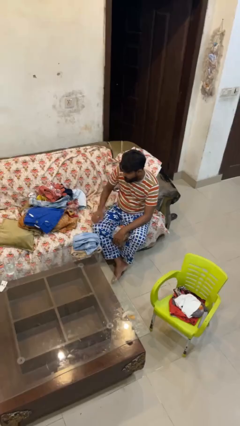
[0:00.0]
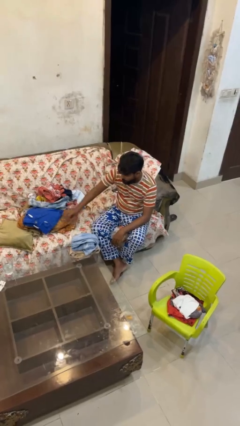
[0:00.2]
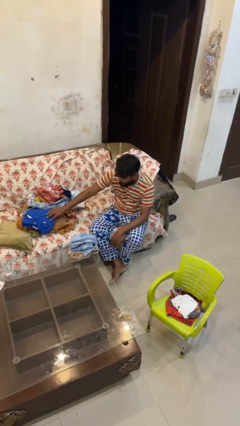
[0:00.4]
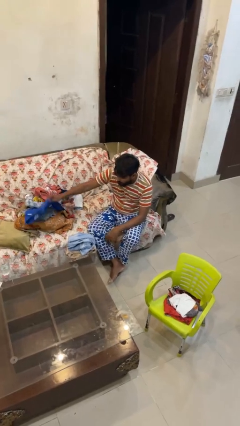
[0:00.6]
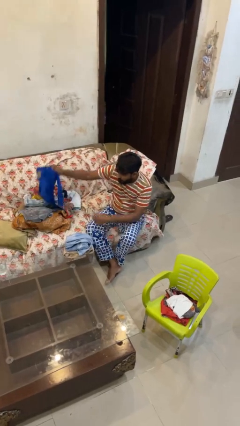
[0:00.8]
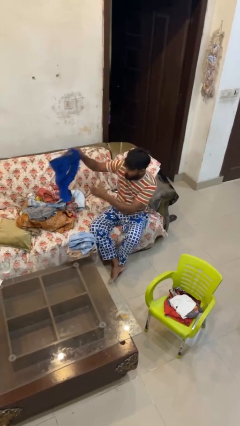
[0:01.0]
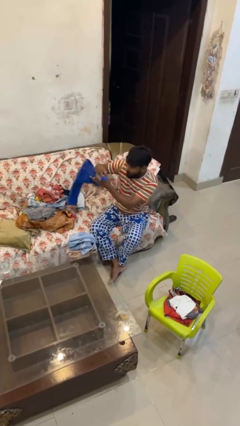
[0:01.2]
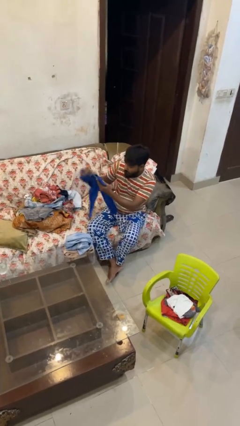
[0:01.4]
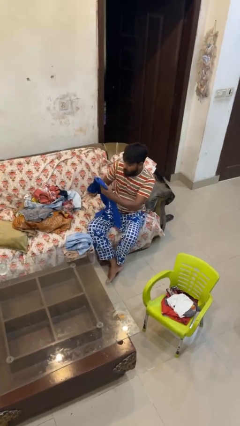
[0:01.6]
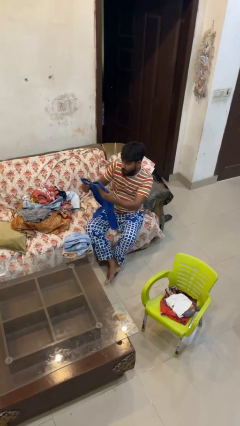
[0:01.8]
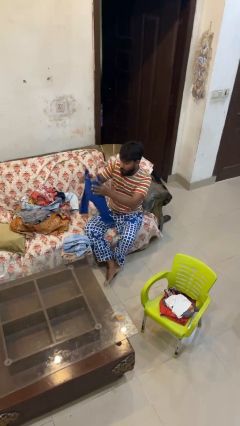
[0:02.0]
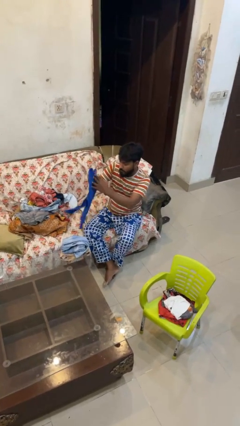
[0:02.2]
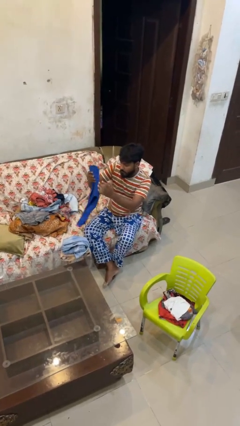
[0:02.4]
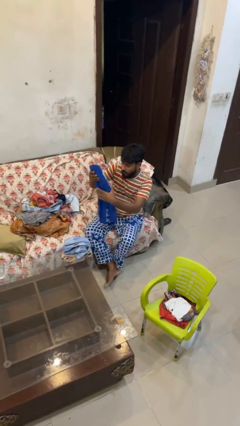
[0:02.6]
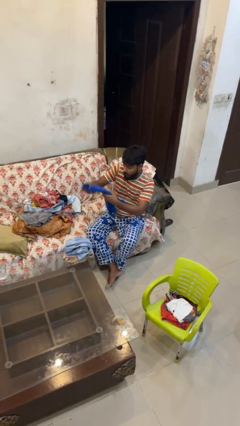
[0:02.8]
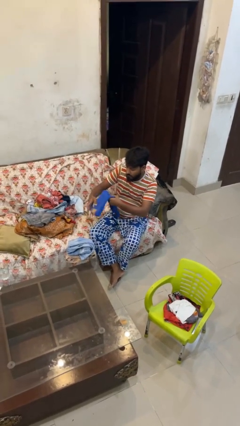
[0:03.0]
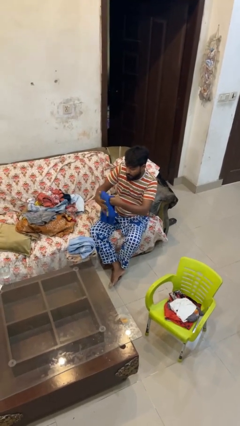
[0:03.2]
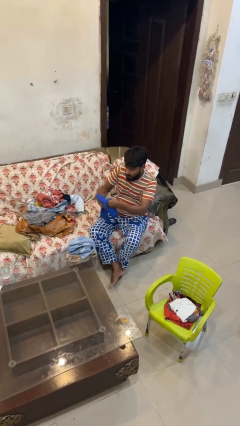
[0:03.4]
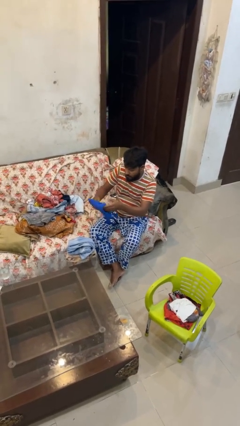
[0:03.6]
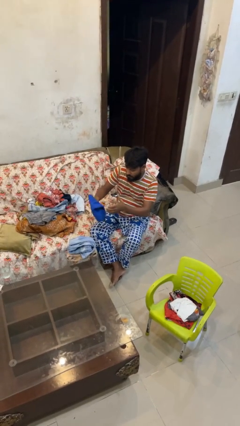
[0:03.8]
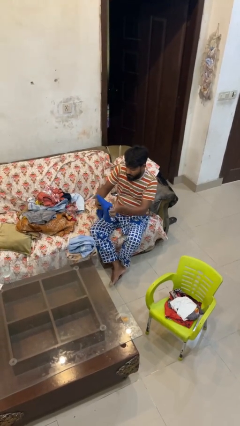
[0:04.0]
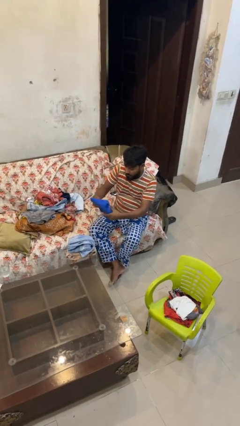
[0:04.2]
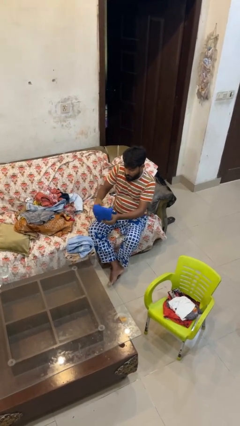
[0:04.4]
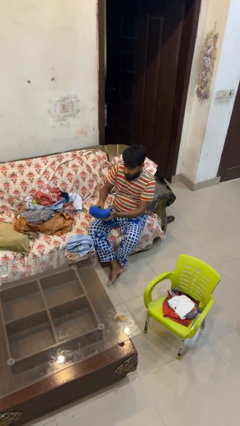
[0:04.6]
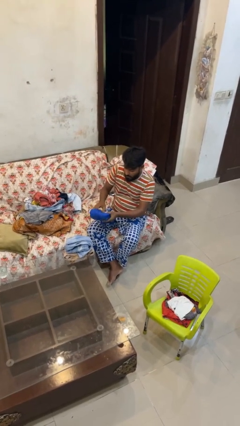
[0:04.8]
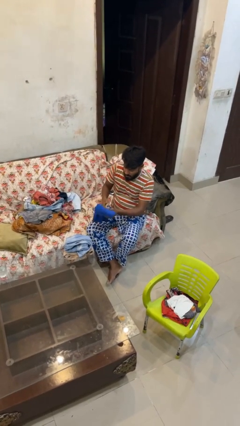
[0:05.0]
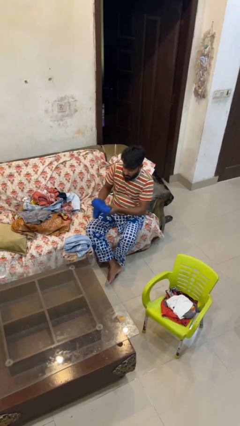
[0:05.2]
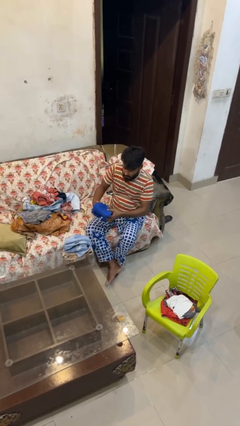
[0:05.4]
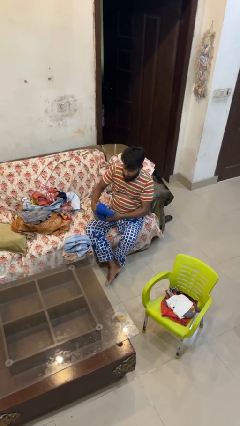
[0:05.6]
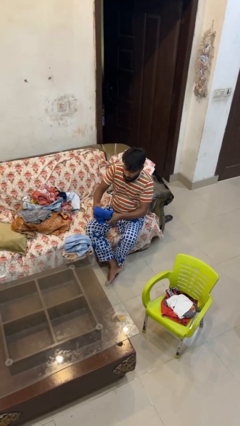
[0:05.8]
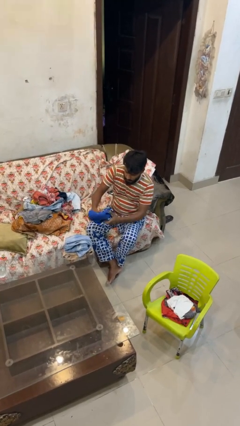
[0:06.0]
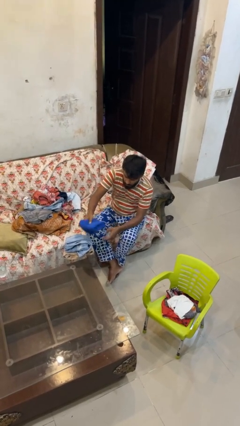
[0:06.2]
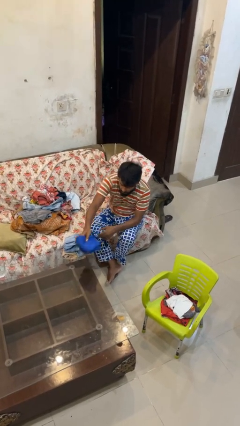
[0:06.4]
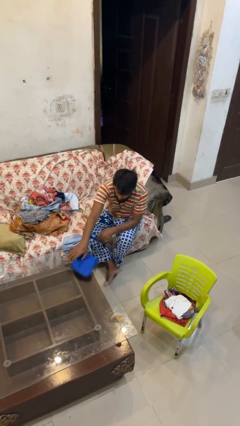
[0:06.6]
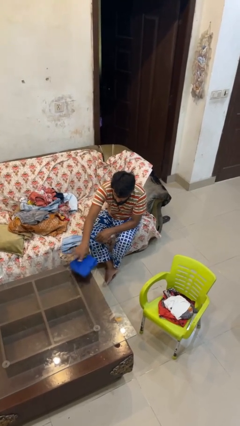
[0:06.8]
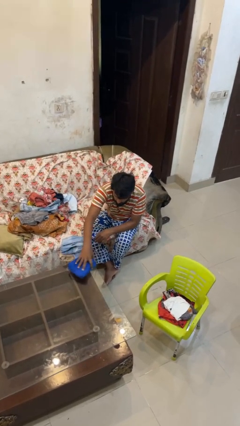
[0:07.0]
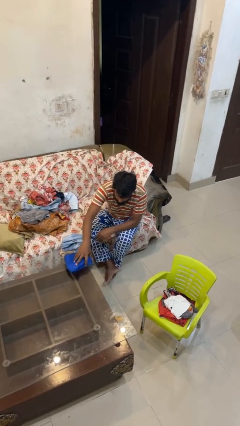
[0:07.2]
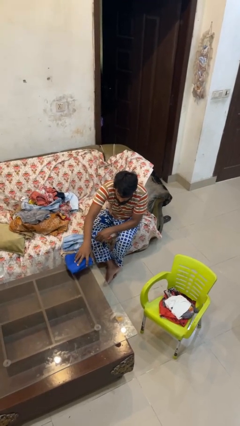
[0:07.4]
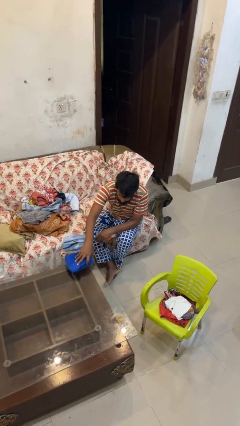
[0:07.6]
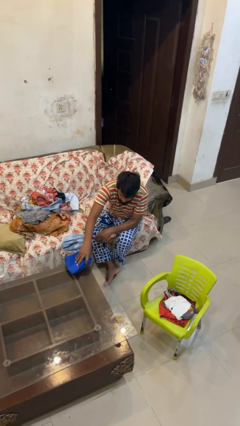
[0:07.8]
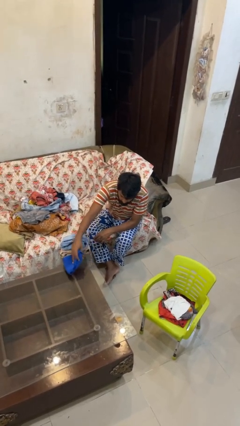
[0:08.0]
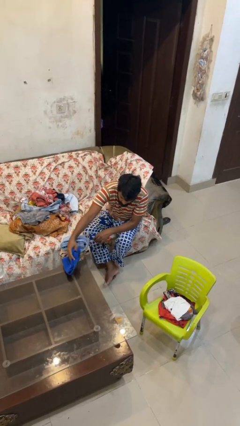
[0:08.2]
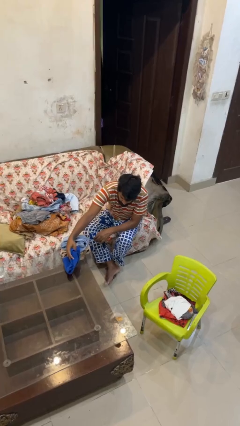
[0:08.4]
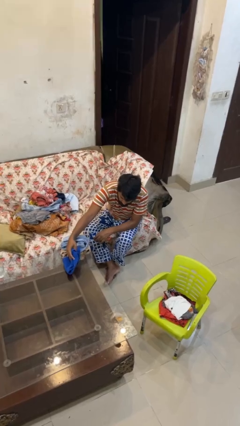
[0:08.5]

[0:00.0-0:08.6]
person folds pants

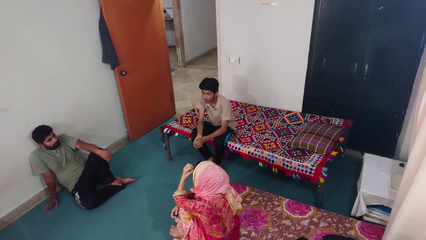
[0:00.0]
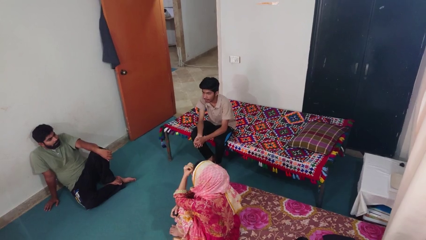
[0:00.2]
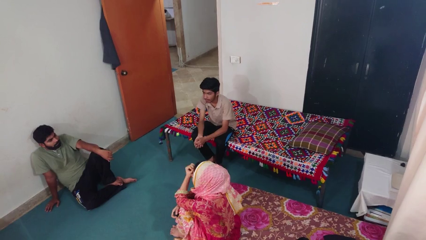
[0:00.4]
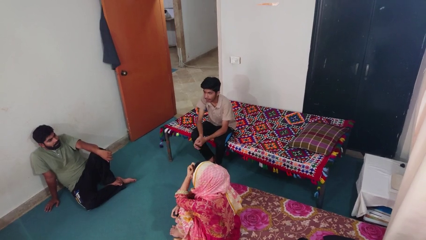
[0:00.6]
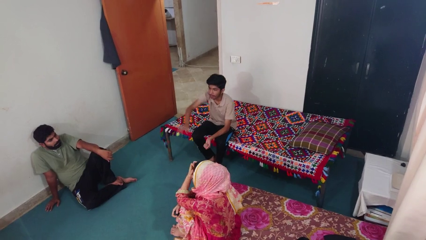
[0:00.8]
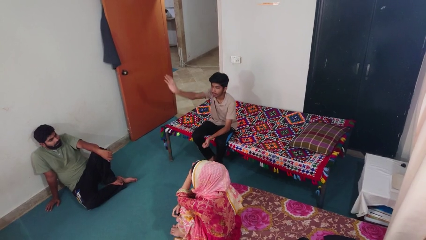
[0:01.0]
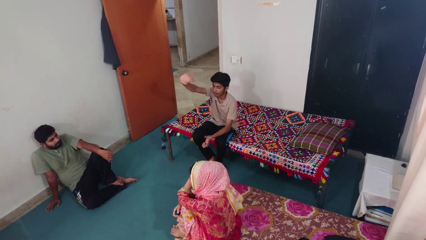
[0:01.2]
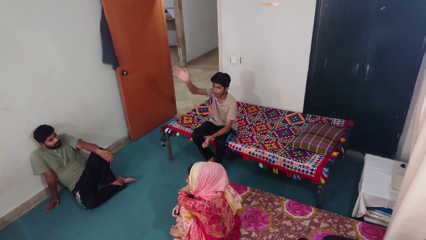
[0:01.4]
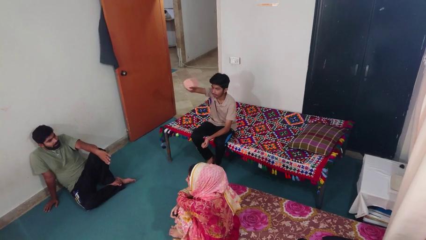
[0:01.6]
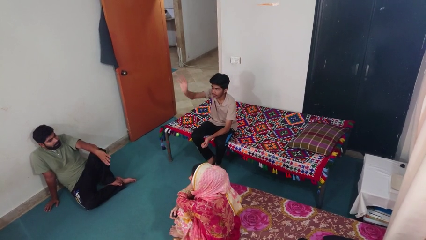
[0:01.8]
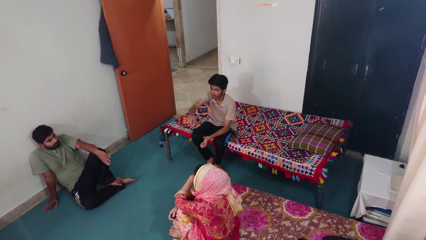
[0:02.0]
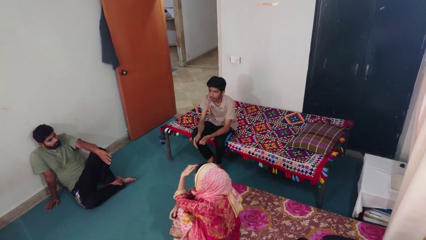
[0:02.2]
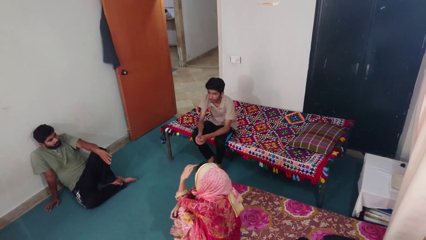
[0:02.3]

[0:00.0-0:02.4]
person waves at person

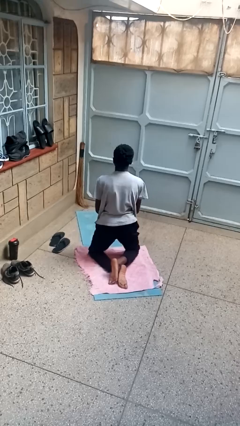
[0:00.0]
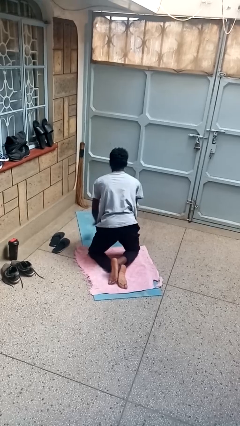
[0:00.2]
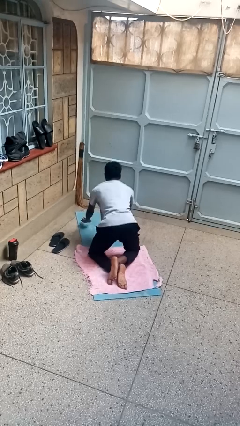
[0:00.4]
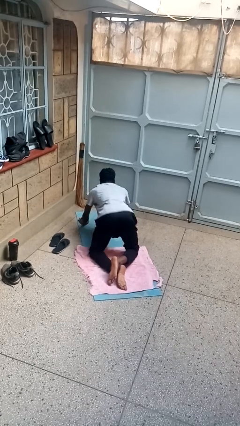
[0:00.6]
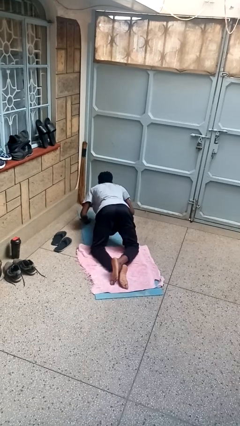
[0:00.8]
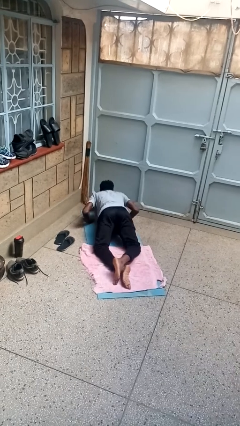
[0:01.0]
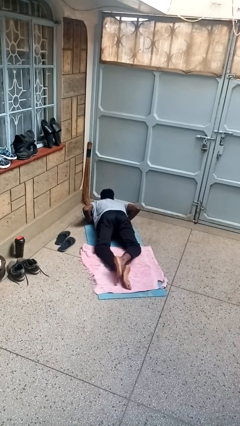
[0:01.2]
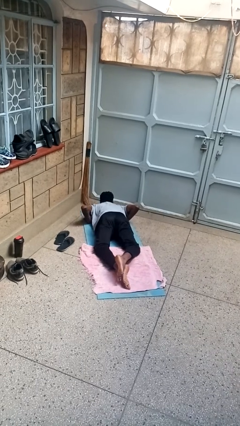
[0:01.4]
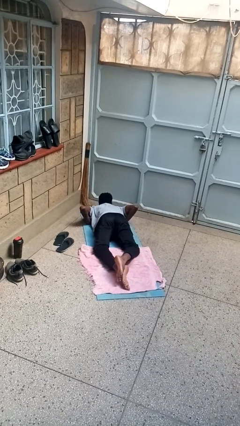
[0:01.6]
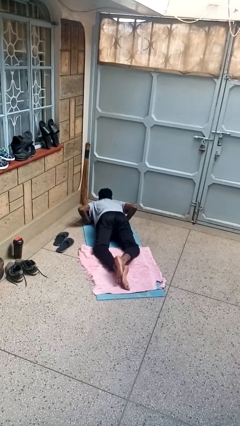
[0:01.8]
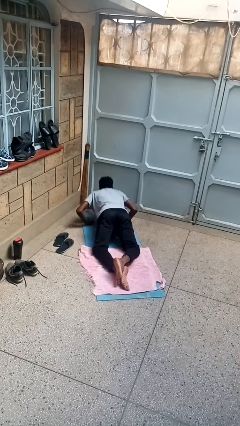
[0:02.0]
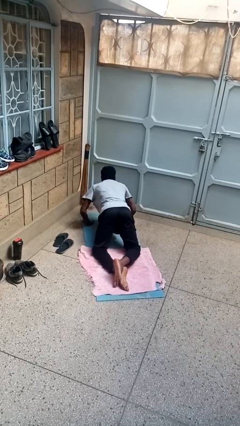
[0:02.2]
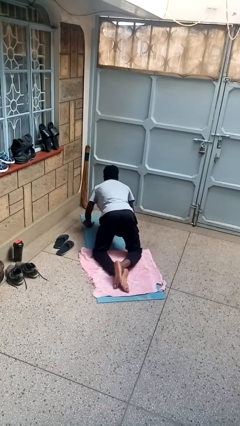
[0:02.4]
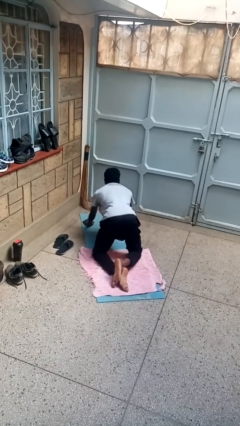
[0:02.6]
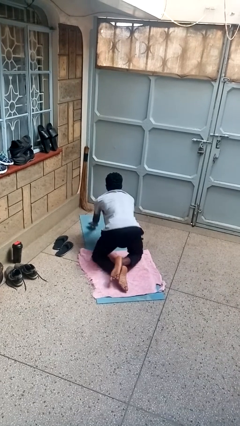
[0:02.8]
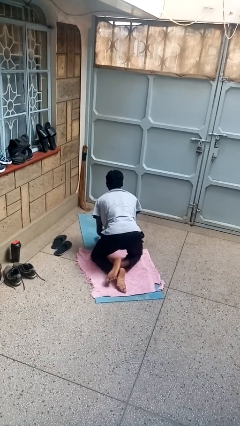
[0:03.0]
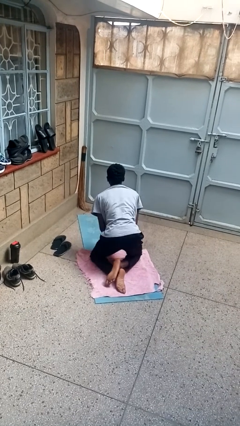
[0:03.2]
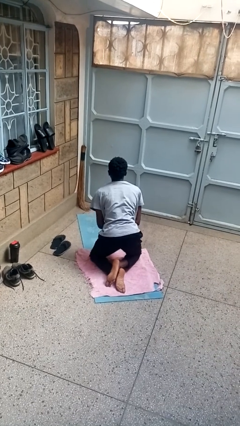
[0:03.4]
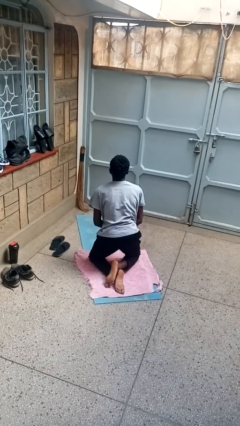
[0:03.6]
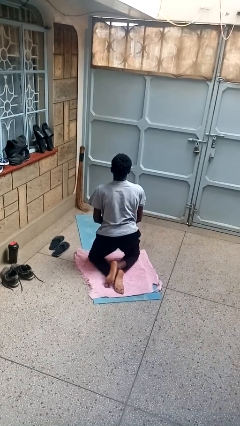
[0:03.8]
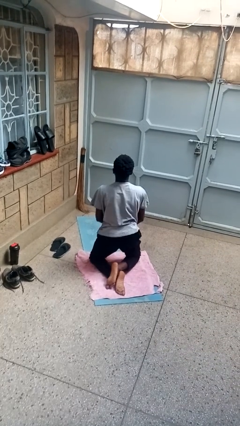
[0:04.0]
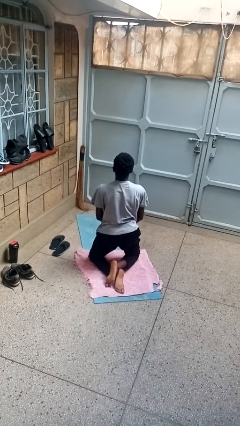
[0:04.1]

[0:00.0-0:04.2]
person exercises with pushup

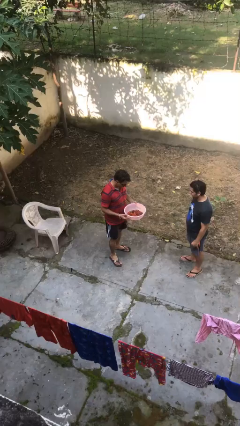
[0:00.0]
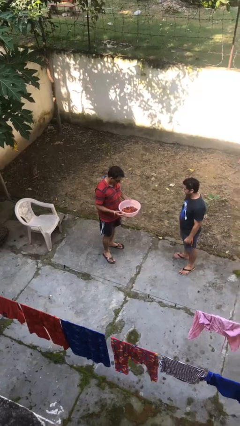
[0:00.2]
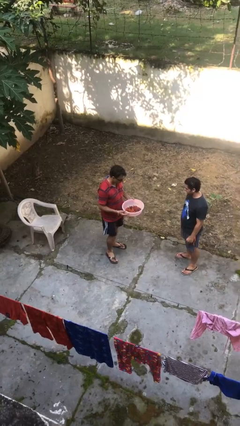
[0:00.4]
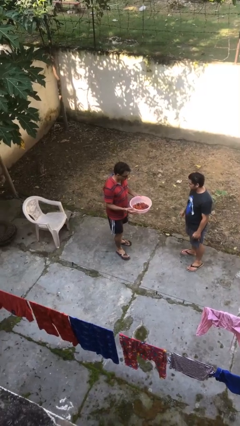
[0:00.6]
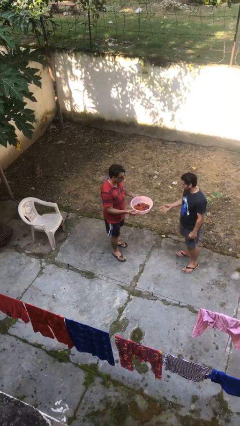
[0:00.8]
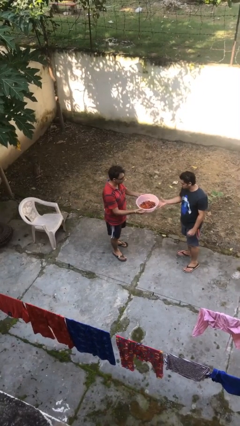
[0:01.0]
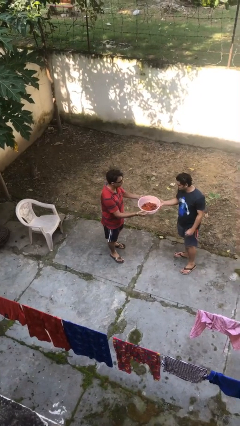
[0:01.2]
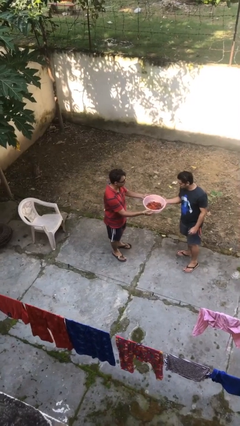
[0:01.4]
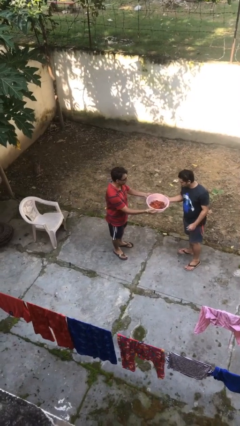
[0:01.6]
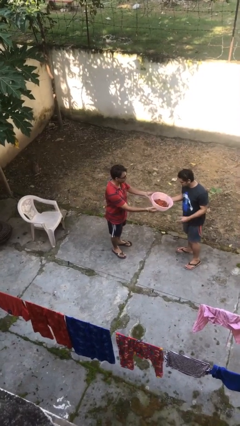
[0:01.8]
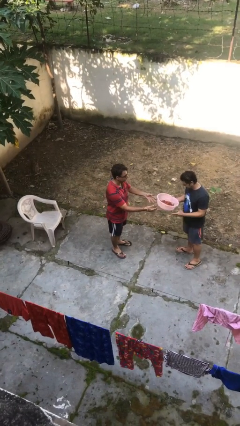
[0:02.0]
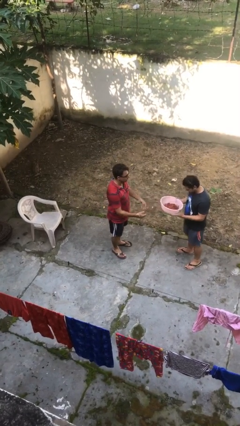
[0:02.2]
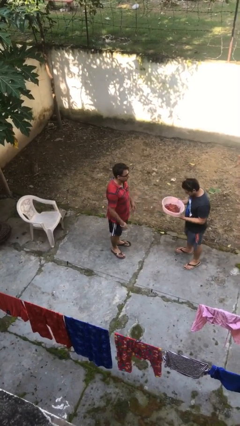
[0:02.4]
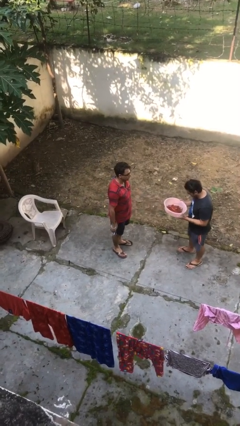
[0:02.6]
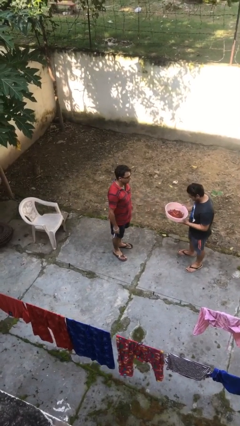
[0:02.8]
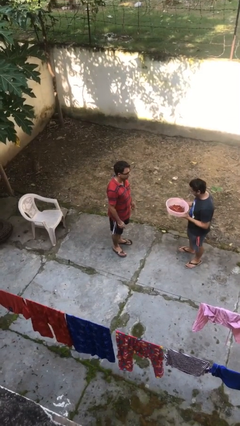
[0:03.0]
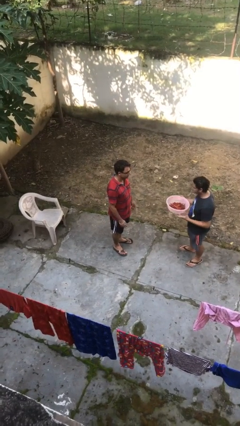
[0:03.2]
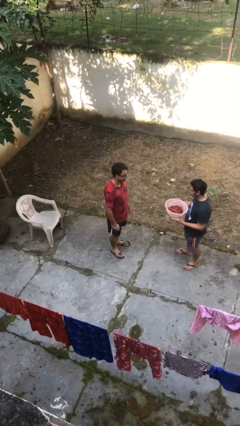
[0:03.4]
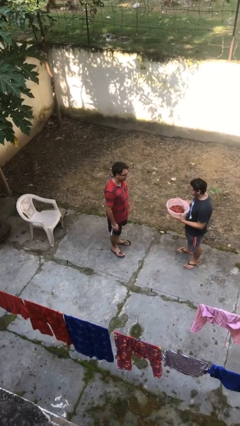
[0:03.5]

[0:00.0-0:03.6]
person transfers object to person
